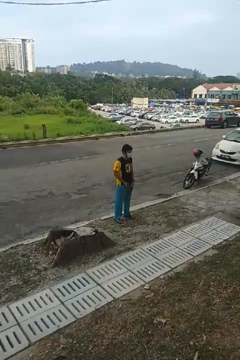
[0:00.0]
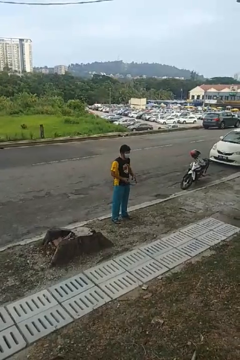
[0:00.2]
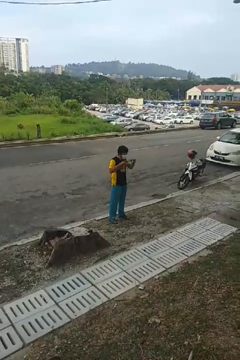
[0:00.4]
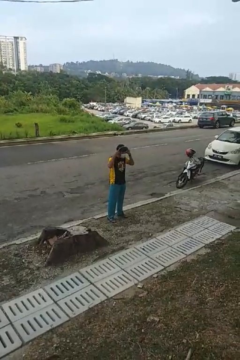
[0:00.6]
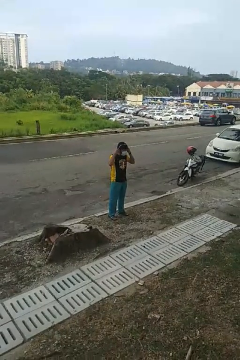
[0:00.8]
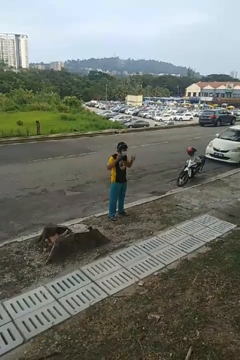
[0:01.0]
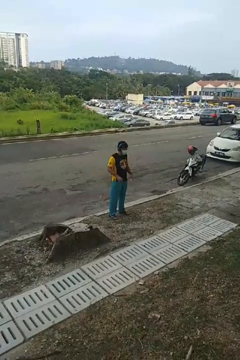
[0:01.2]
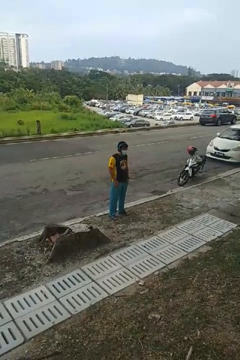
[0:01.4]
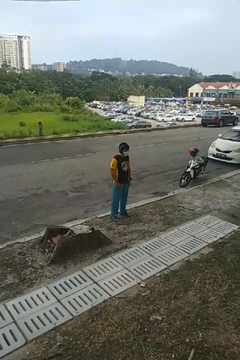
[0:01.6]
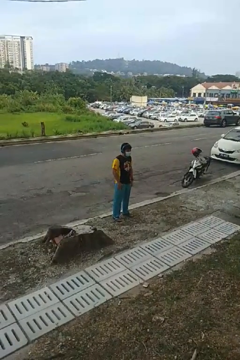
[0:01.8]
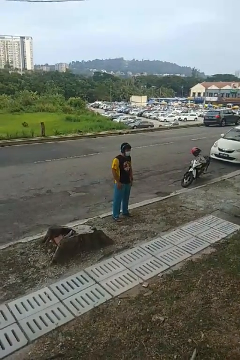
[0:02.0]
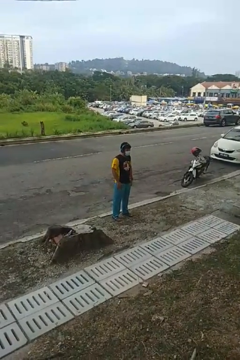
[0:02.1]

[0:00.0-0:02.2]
person puts on headphones

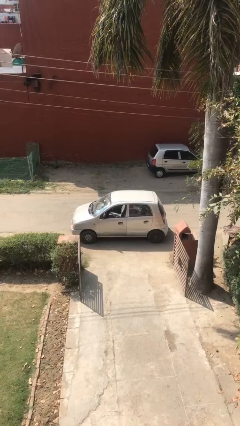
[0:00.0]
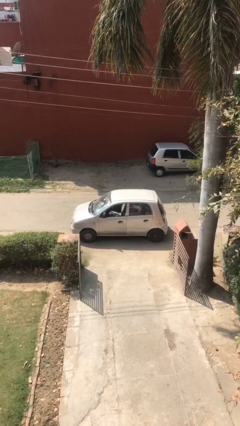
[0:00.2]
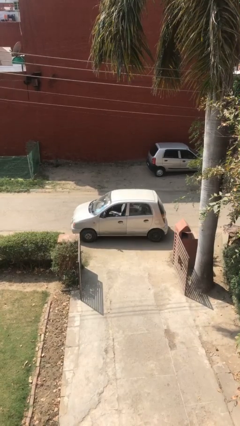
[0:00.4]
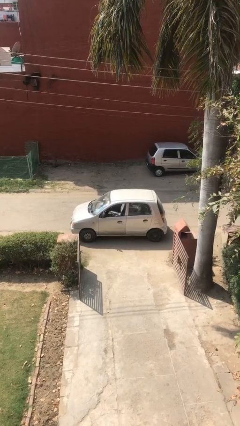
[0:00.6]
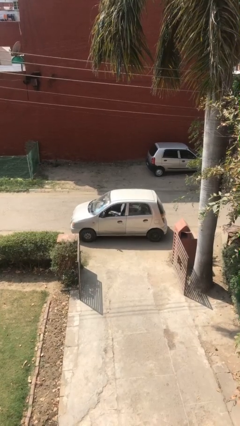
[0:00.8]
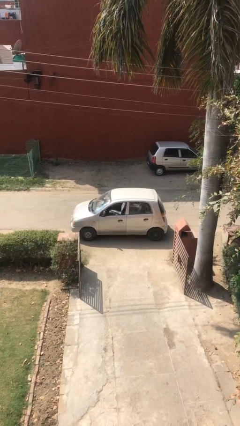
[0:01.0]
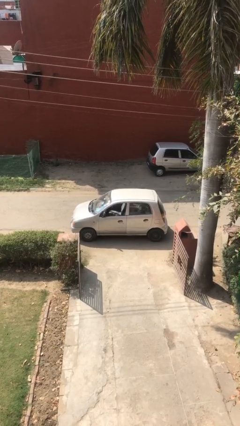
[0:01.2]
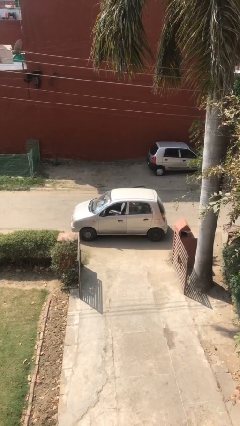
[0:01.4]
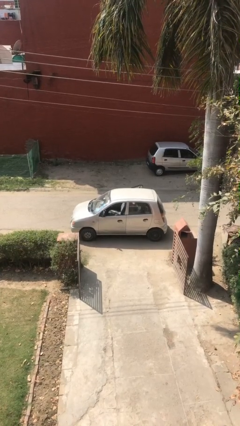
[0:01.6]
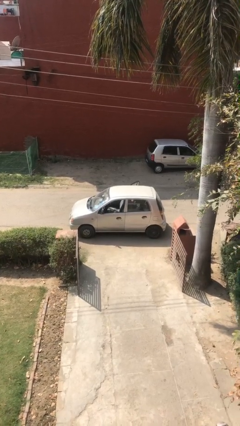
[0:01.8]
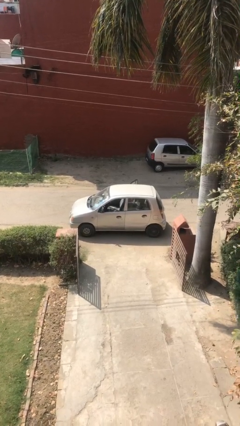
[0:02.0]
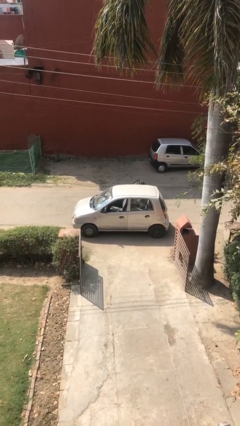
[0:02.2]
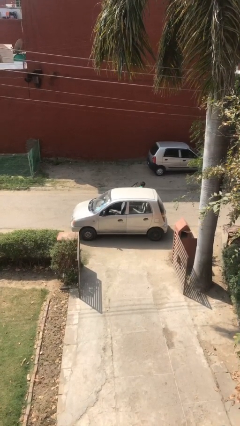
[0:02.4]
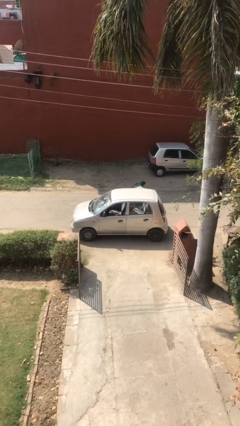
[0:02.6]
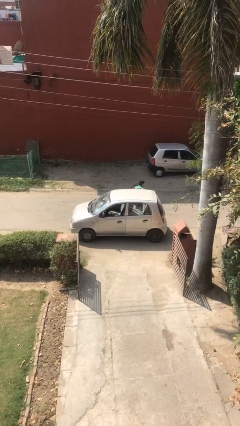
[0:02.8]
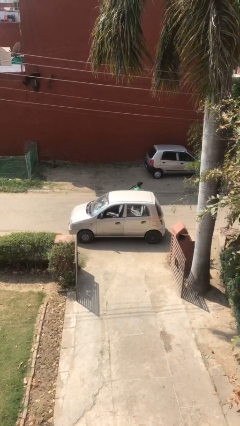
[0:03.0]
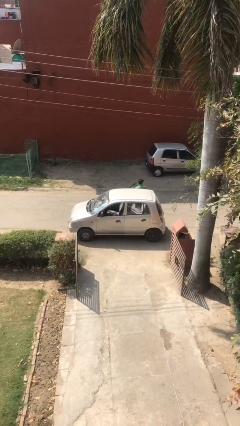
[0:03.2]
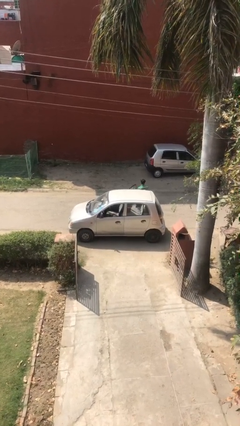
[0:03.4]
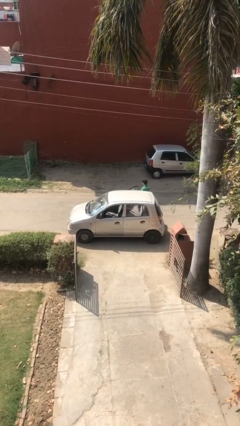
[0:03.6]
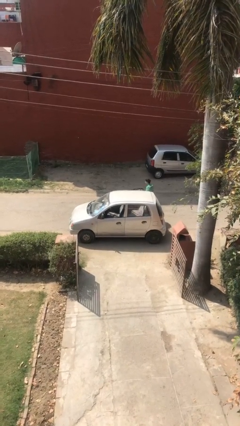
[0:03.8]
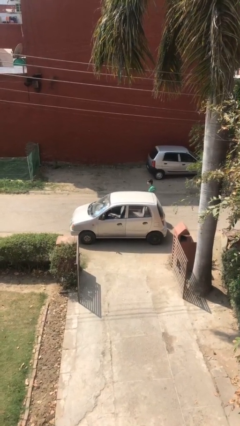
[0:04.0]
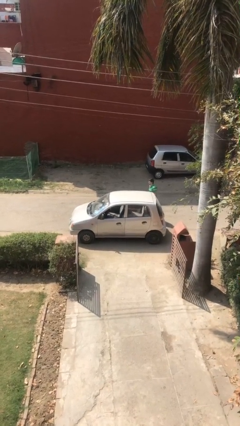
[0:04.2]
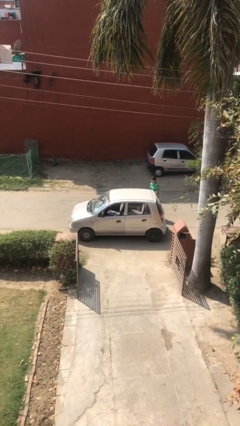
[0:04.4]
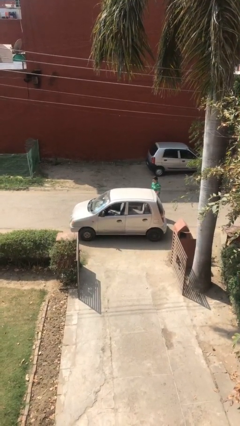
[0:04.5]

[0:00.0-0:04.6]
car drops off person

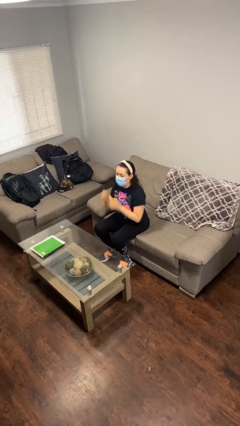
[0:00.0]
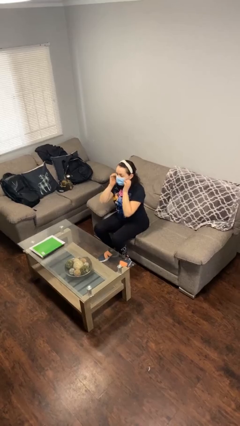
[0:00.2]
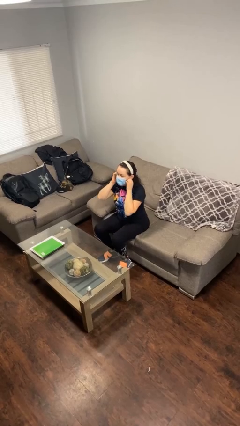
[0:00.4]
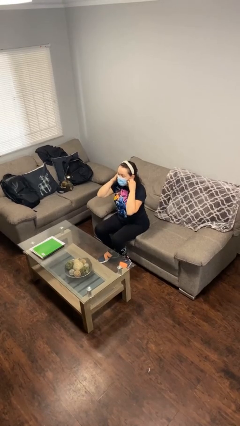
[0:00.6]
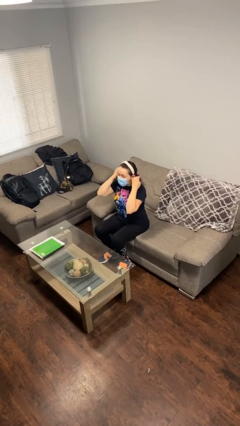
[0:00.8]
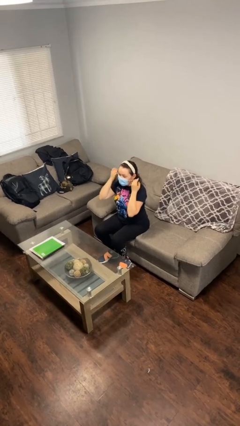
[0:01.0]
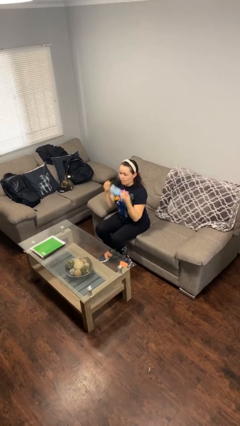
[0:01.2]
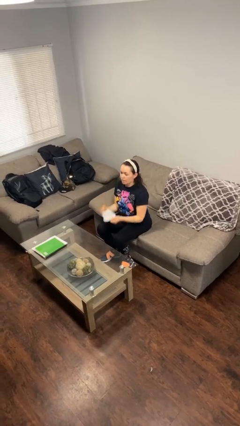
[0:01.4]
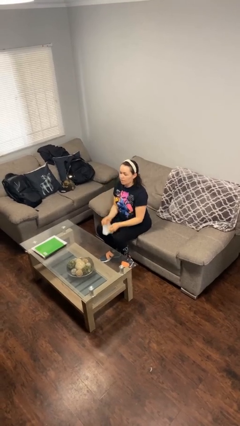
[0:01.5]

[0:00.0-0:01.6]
person takes off facemask

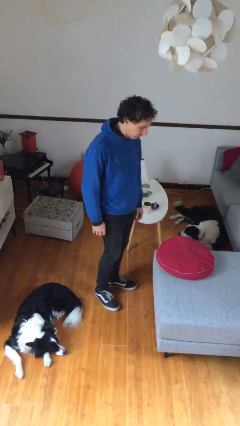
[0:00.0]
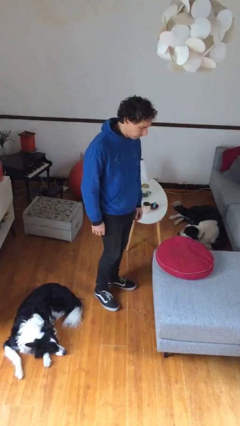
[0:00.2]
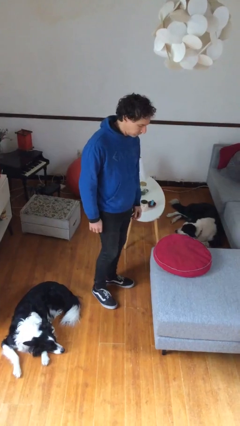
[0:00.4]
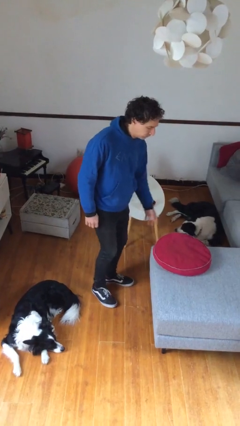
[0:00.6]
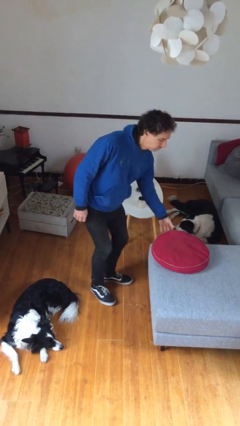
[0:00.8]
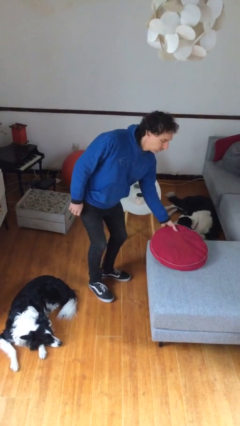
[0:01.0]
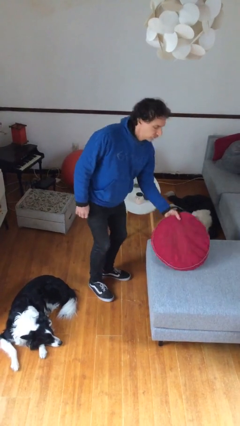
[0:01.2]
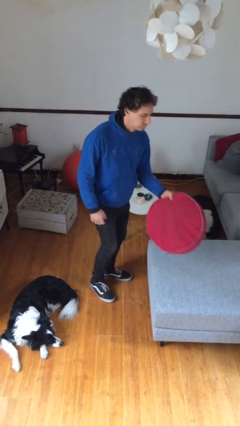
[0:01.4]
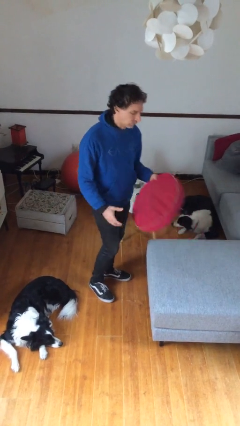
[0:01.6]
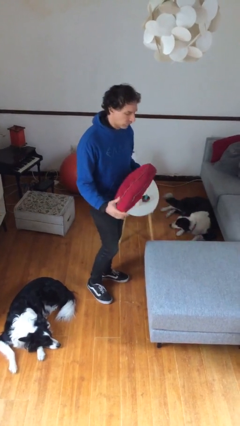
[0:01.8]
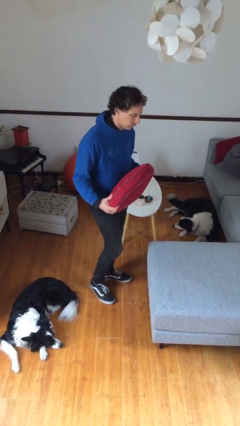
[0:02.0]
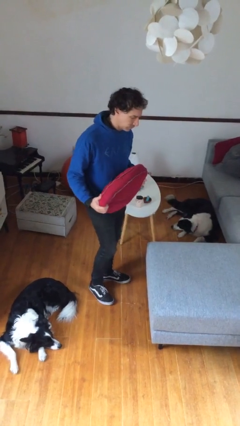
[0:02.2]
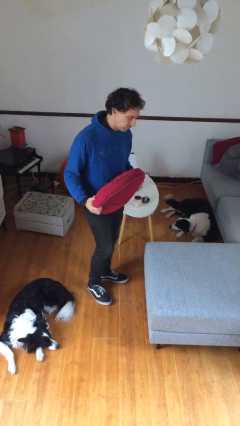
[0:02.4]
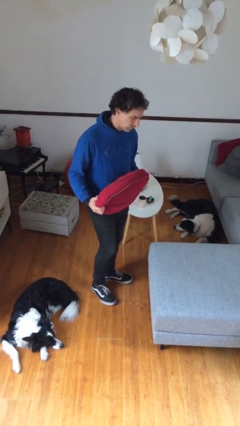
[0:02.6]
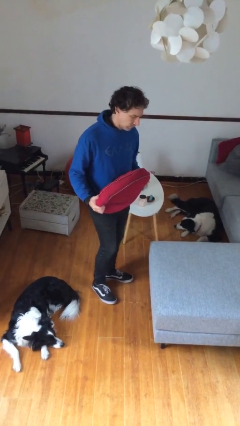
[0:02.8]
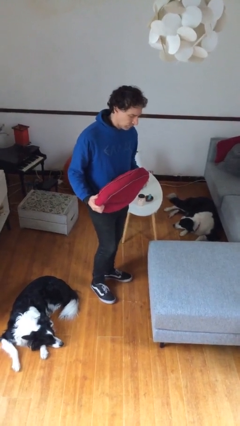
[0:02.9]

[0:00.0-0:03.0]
person picks up object from couch

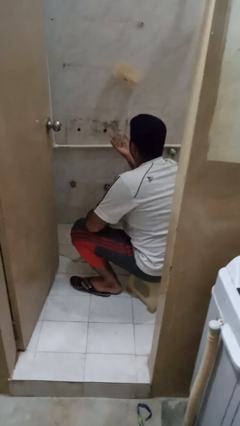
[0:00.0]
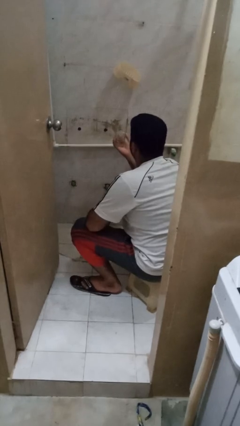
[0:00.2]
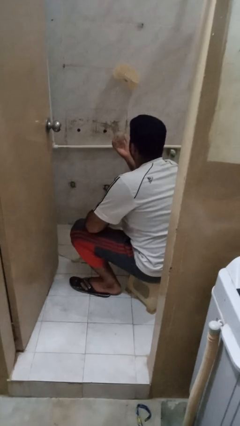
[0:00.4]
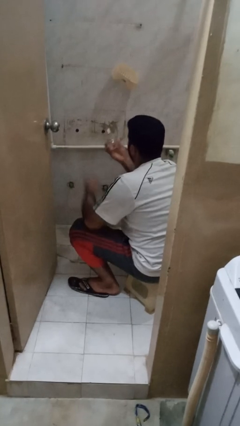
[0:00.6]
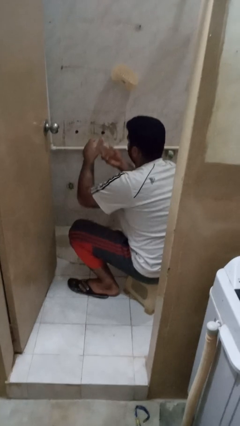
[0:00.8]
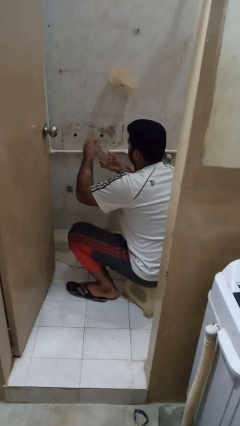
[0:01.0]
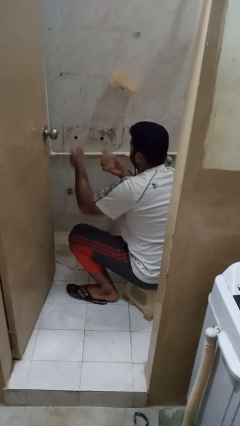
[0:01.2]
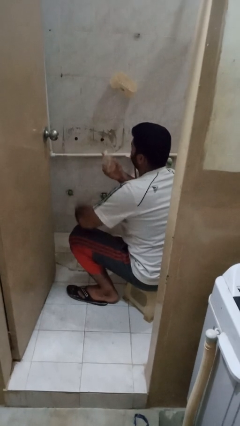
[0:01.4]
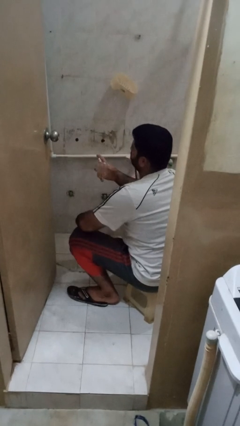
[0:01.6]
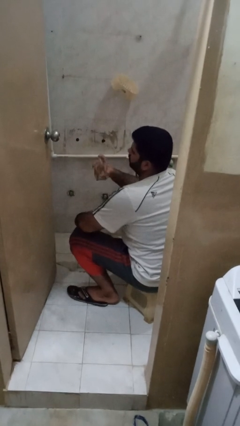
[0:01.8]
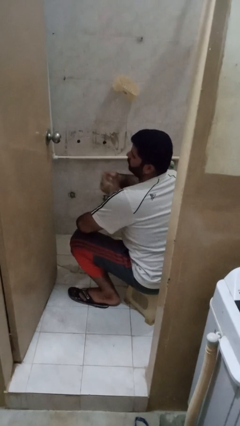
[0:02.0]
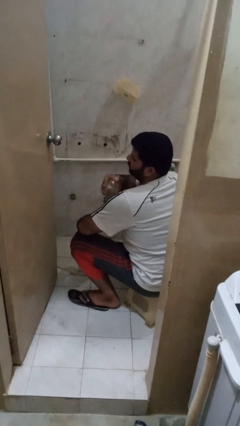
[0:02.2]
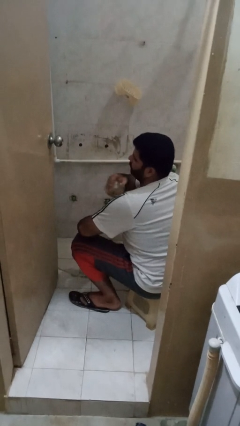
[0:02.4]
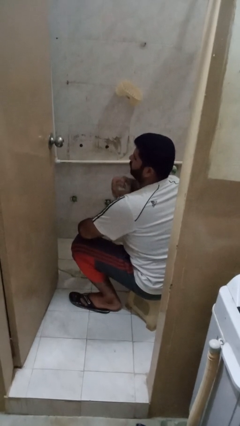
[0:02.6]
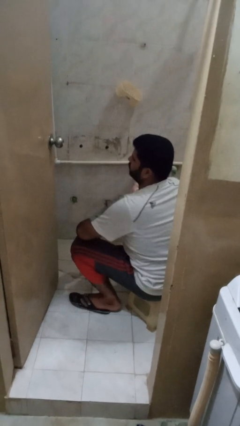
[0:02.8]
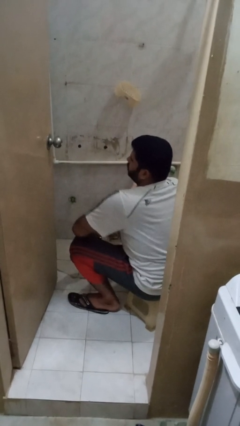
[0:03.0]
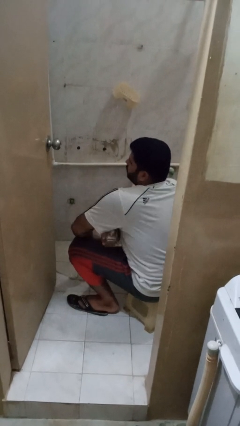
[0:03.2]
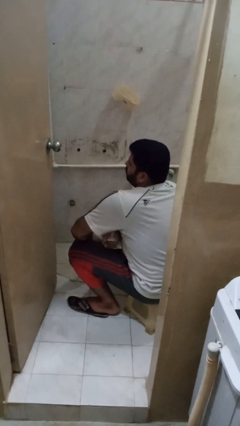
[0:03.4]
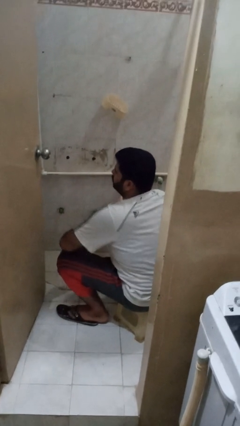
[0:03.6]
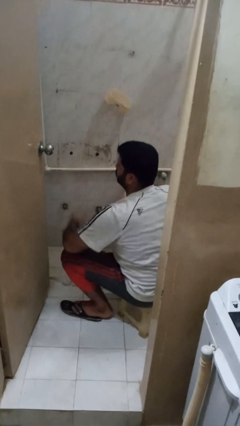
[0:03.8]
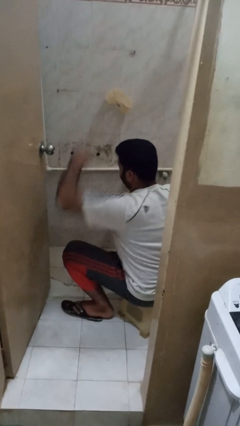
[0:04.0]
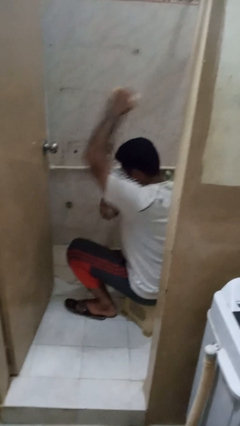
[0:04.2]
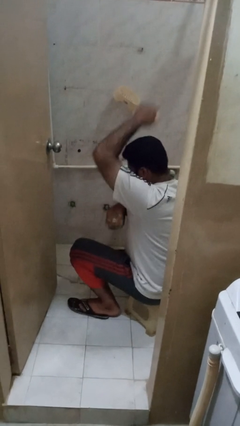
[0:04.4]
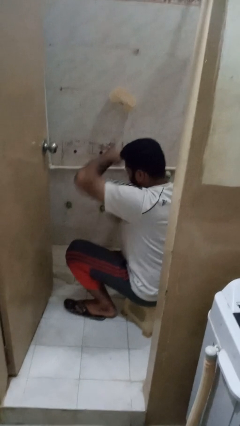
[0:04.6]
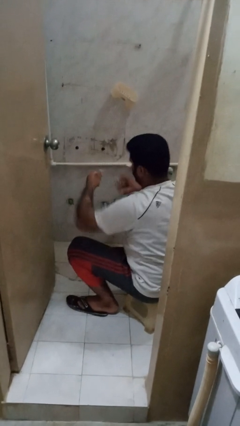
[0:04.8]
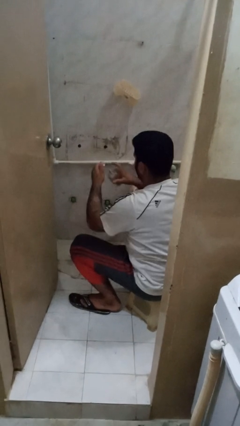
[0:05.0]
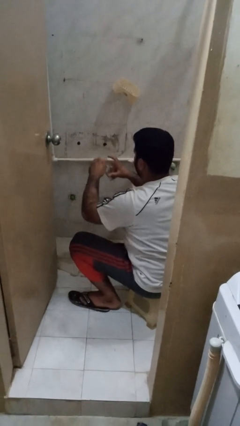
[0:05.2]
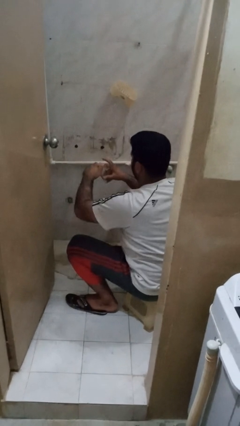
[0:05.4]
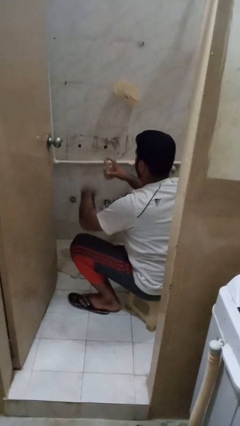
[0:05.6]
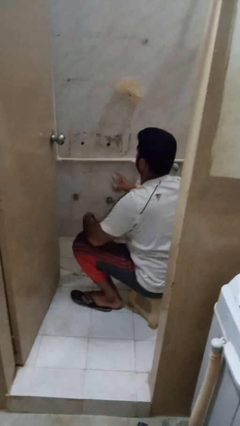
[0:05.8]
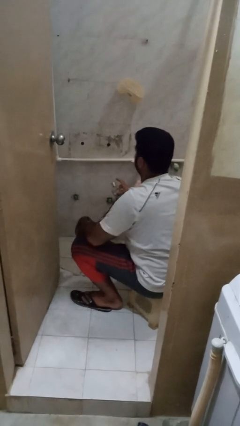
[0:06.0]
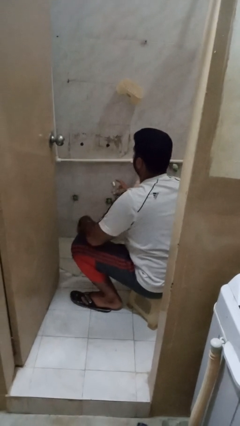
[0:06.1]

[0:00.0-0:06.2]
person applies deodorant

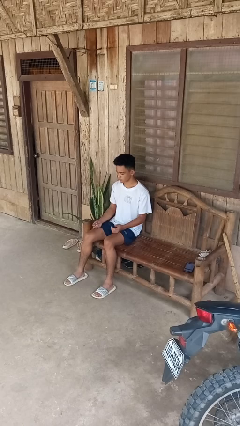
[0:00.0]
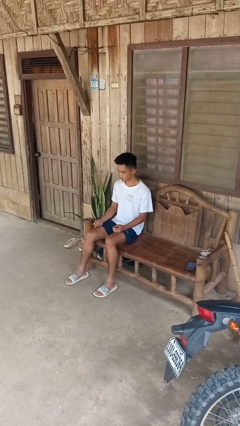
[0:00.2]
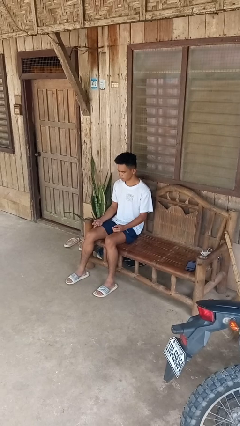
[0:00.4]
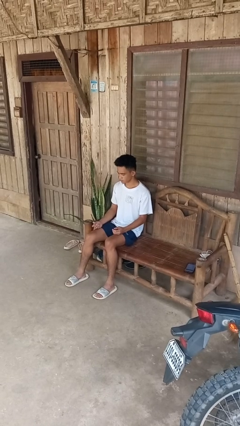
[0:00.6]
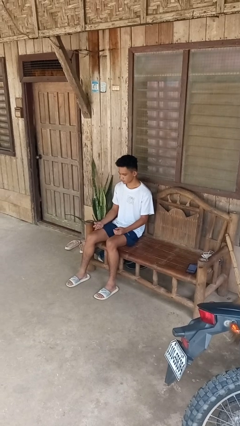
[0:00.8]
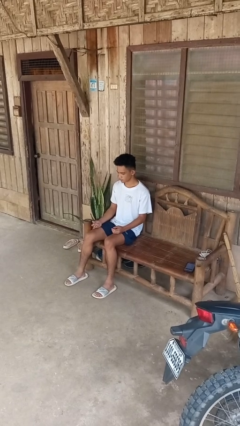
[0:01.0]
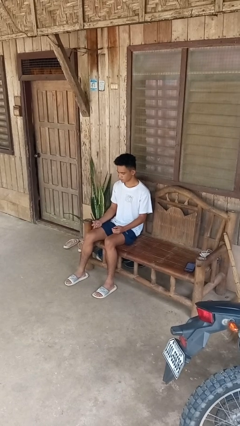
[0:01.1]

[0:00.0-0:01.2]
person takes off ring
